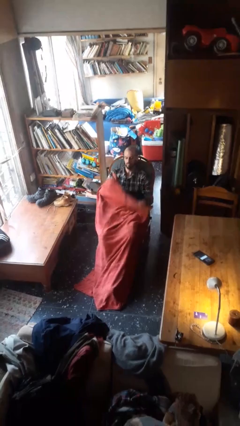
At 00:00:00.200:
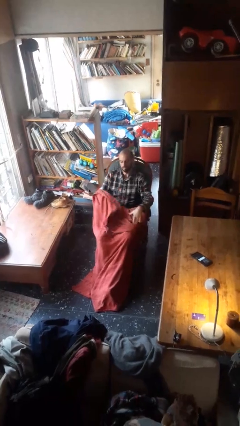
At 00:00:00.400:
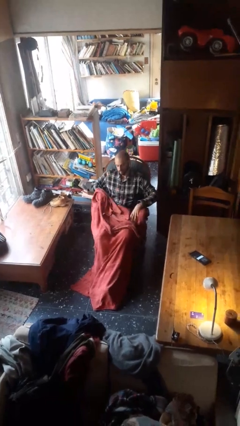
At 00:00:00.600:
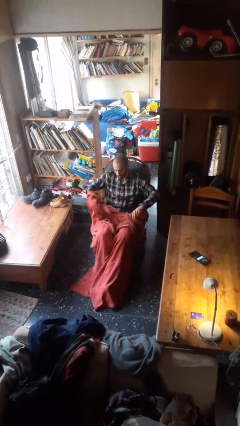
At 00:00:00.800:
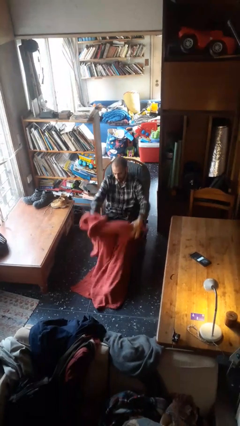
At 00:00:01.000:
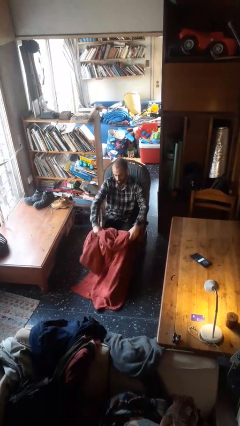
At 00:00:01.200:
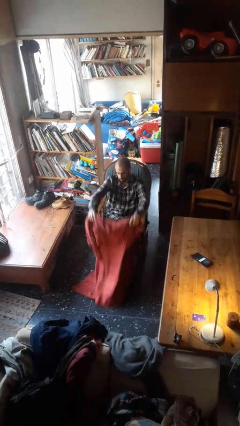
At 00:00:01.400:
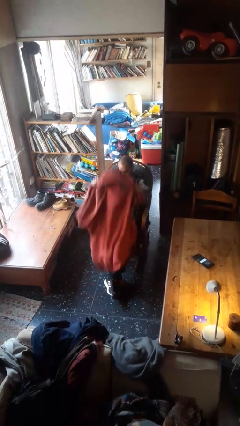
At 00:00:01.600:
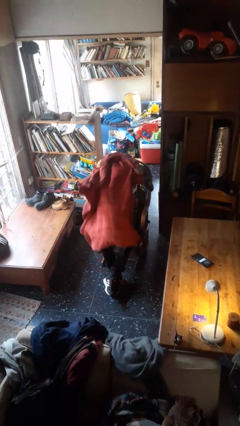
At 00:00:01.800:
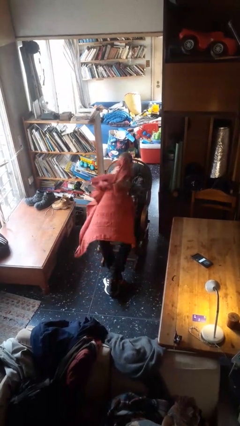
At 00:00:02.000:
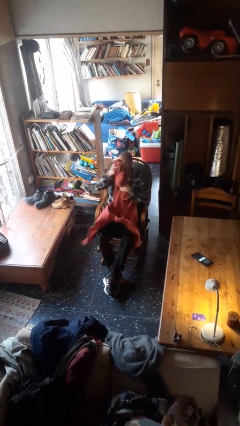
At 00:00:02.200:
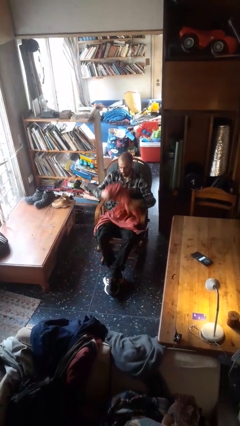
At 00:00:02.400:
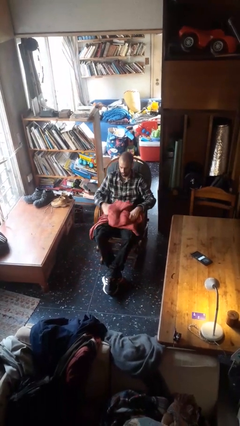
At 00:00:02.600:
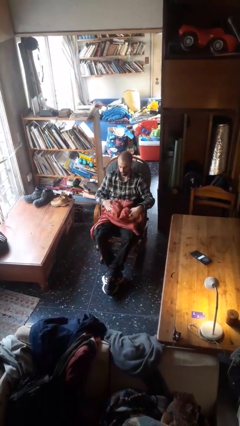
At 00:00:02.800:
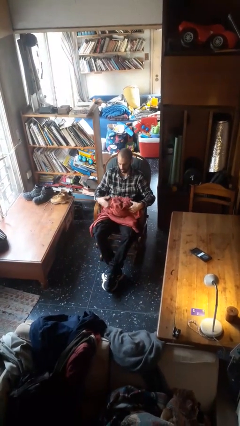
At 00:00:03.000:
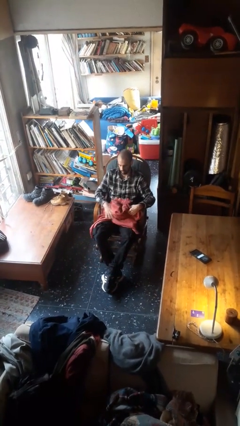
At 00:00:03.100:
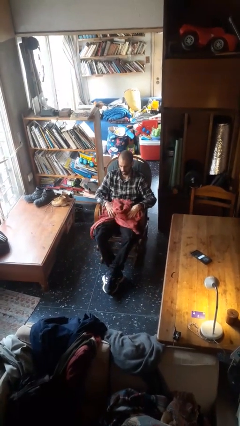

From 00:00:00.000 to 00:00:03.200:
person uncovers with blanket

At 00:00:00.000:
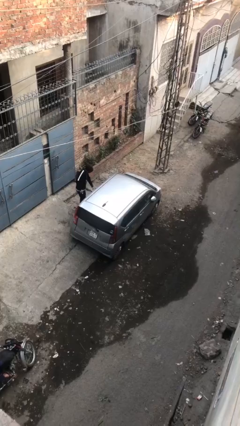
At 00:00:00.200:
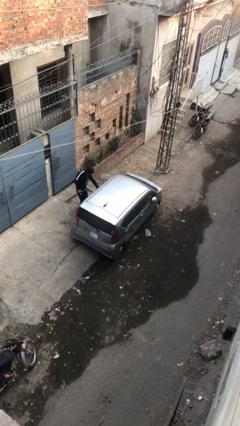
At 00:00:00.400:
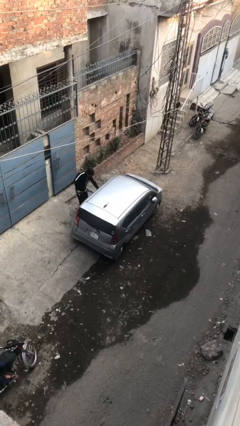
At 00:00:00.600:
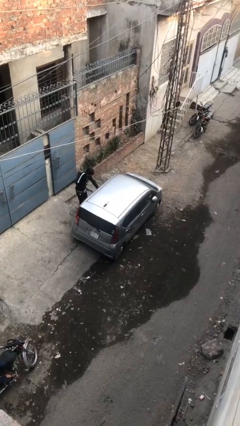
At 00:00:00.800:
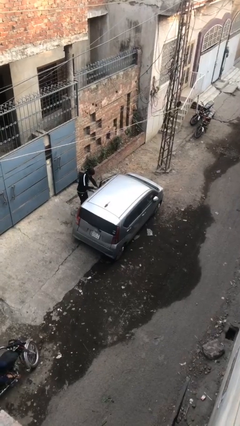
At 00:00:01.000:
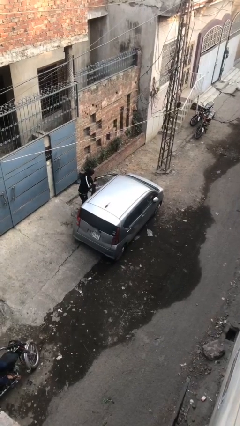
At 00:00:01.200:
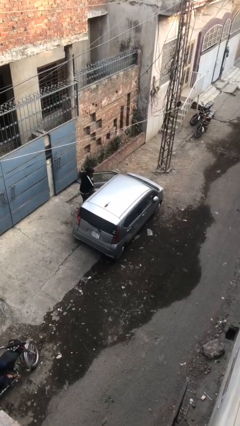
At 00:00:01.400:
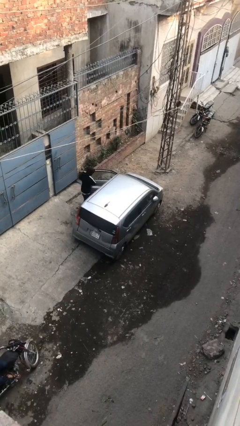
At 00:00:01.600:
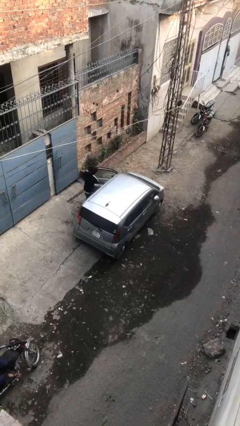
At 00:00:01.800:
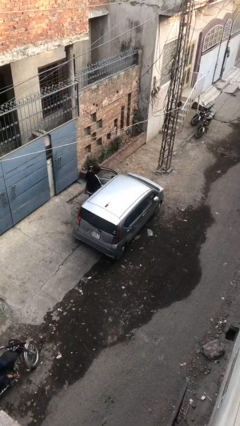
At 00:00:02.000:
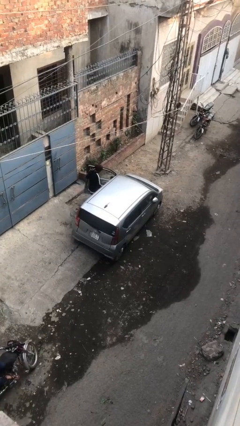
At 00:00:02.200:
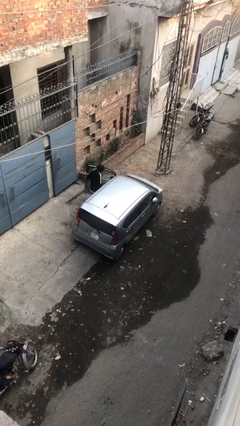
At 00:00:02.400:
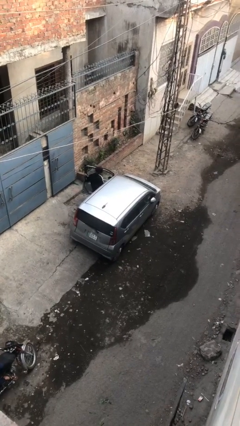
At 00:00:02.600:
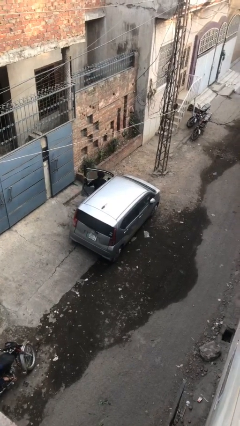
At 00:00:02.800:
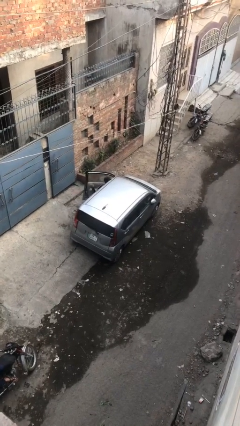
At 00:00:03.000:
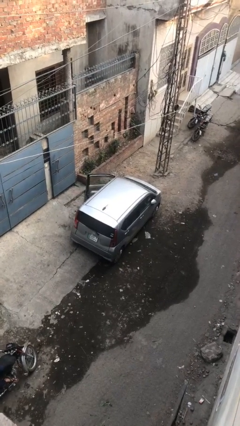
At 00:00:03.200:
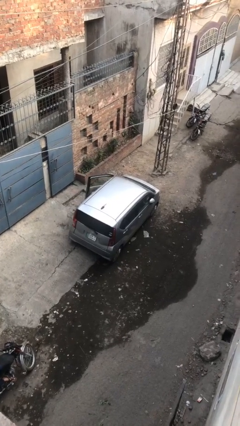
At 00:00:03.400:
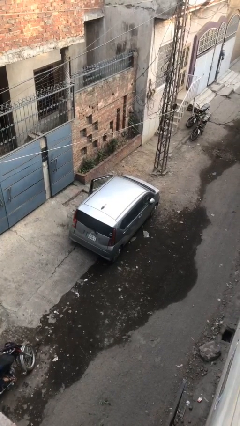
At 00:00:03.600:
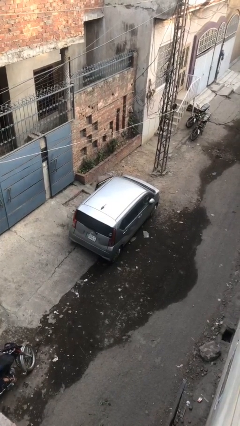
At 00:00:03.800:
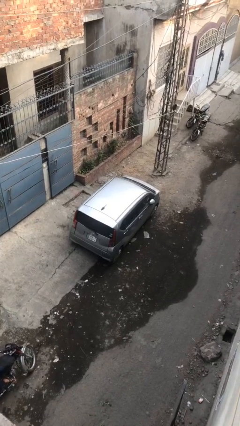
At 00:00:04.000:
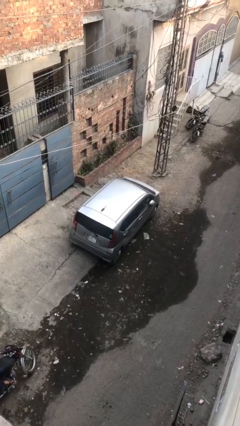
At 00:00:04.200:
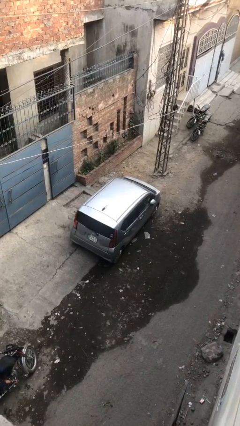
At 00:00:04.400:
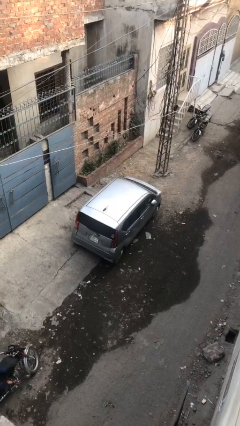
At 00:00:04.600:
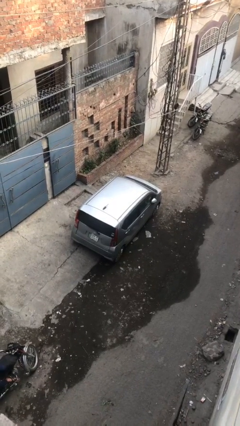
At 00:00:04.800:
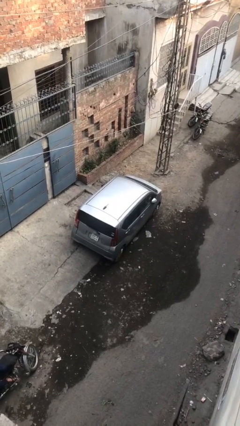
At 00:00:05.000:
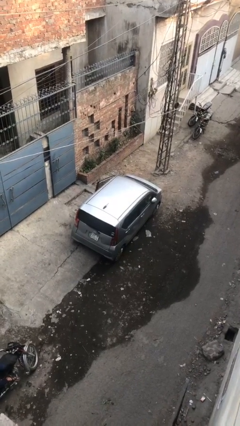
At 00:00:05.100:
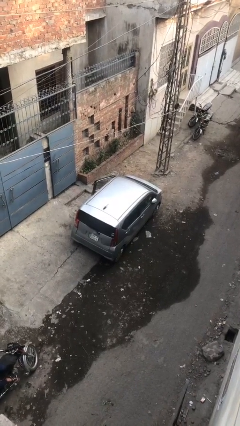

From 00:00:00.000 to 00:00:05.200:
car picks up person

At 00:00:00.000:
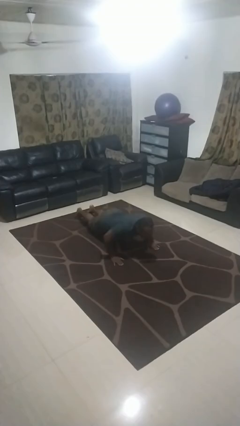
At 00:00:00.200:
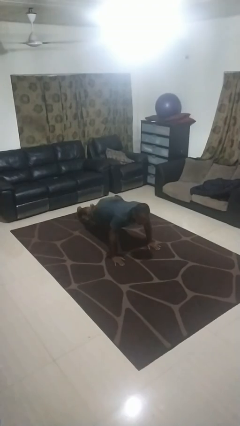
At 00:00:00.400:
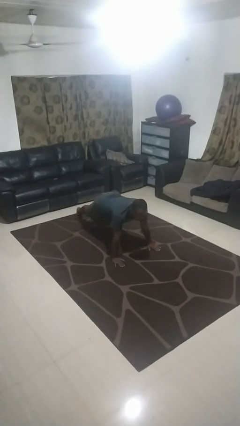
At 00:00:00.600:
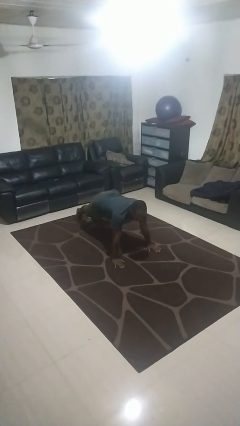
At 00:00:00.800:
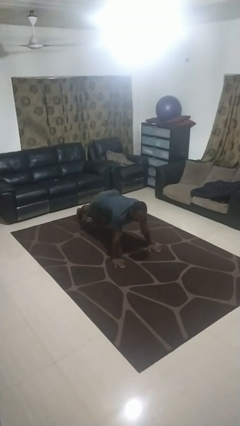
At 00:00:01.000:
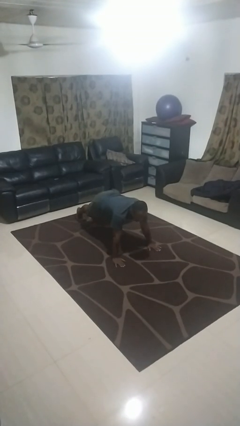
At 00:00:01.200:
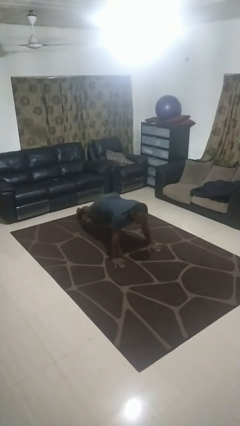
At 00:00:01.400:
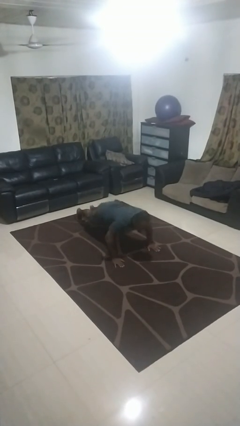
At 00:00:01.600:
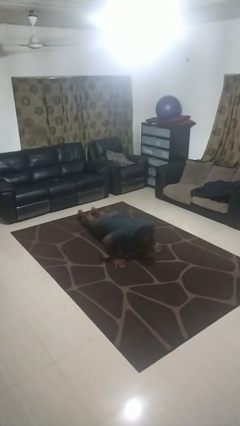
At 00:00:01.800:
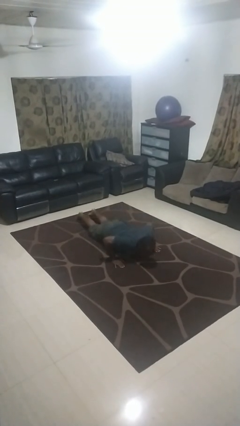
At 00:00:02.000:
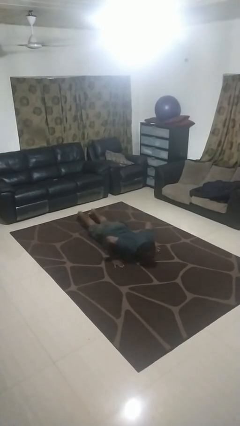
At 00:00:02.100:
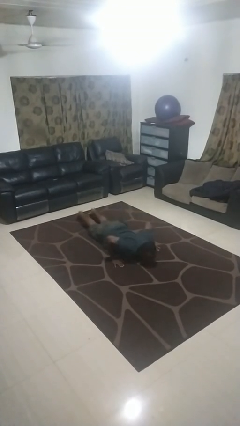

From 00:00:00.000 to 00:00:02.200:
person exercises with pushup

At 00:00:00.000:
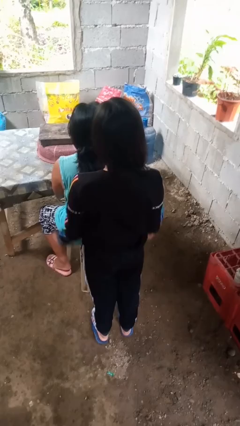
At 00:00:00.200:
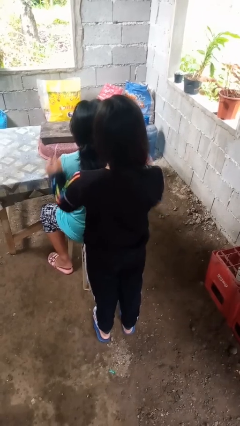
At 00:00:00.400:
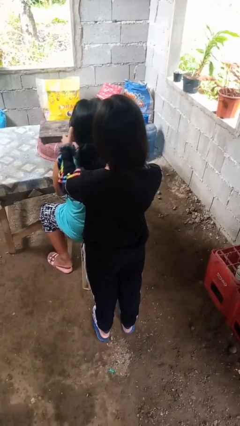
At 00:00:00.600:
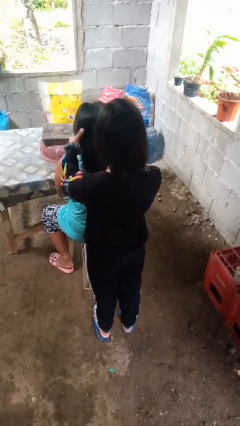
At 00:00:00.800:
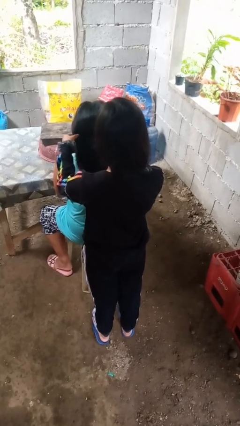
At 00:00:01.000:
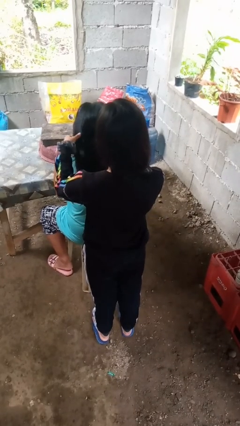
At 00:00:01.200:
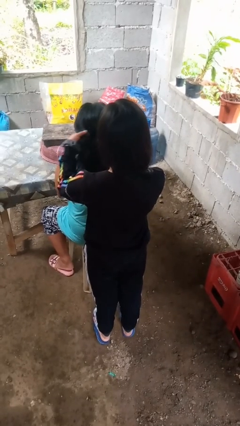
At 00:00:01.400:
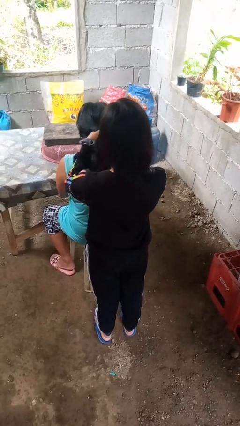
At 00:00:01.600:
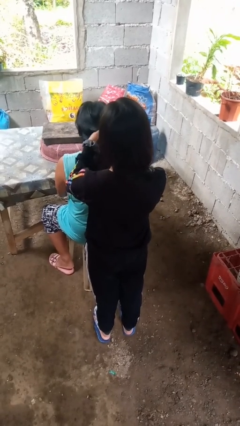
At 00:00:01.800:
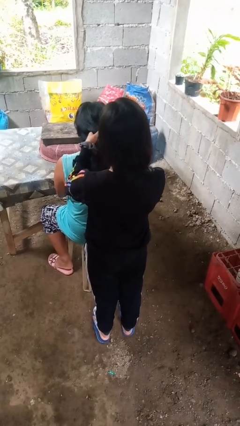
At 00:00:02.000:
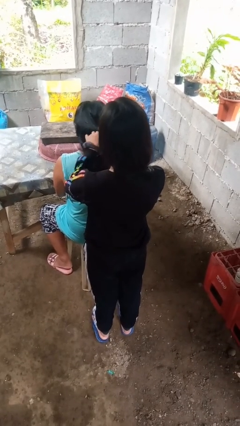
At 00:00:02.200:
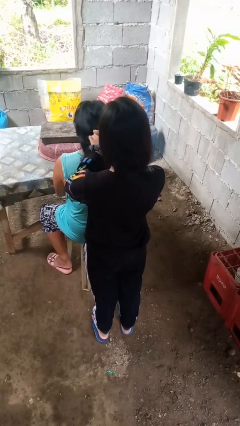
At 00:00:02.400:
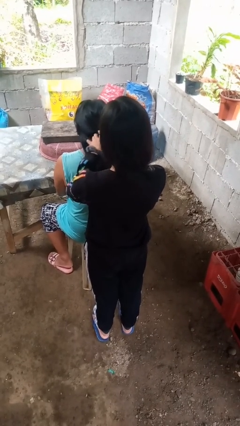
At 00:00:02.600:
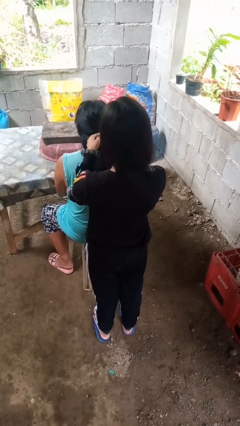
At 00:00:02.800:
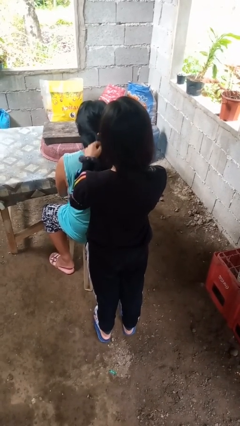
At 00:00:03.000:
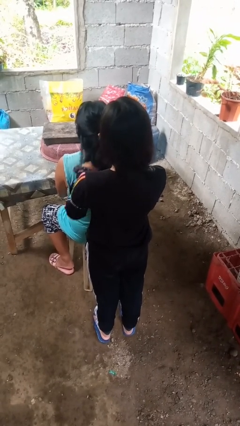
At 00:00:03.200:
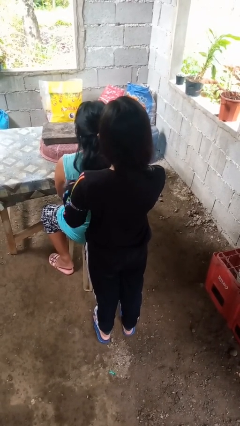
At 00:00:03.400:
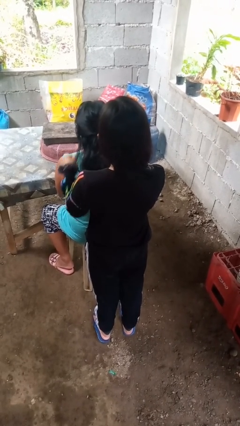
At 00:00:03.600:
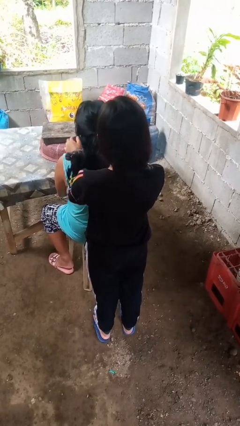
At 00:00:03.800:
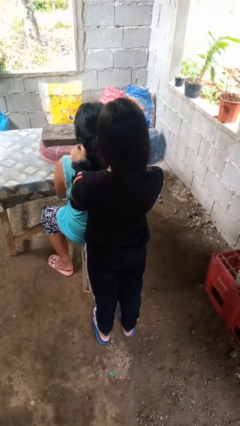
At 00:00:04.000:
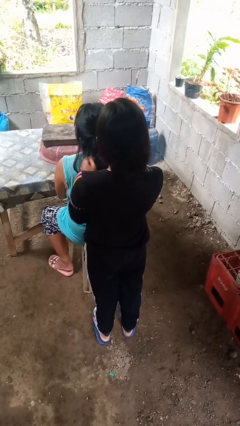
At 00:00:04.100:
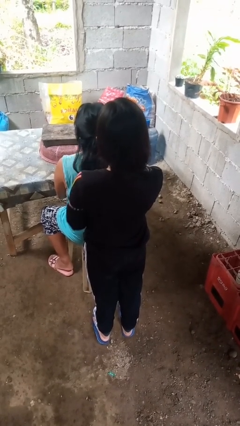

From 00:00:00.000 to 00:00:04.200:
person braids hair of person

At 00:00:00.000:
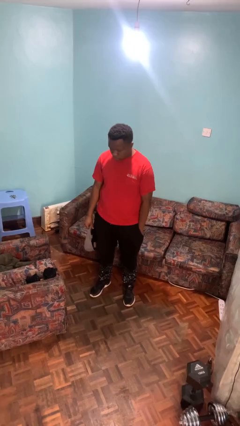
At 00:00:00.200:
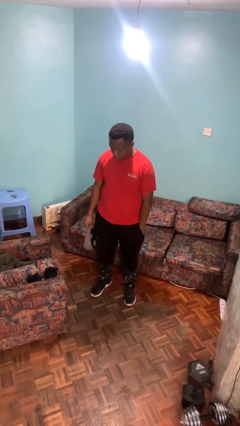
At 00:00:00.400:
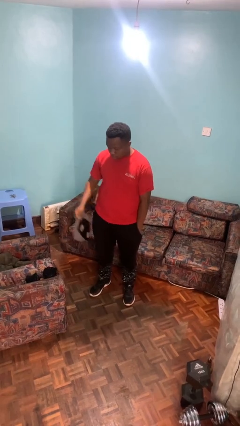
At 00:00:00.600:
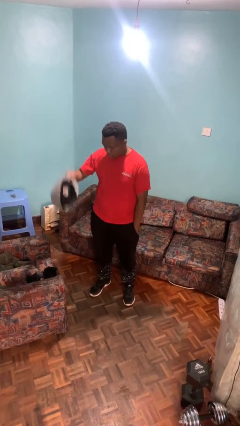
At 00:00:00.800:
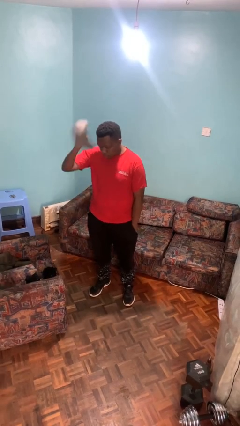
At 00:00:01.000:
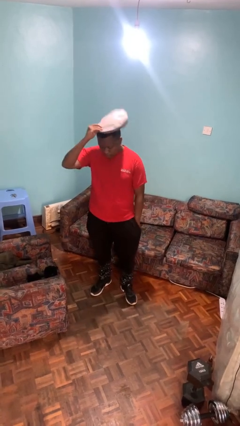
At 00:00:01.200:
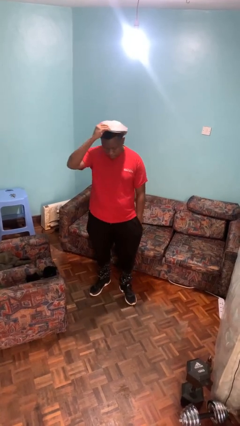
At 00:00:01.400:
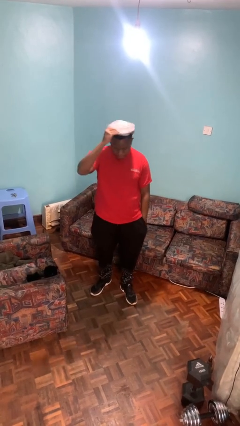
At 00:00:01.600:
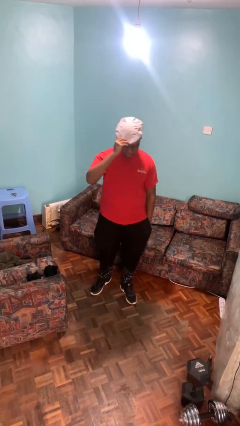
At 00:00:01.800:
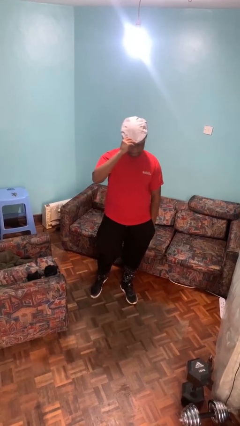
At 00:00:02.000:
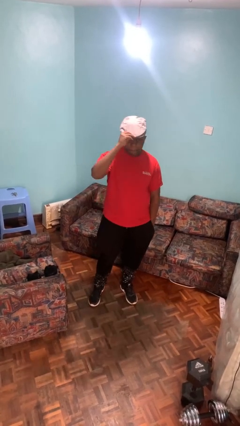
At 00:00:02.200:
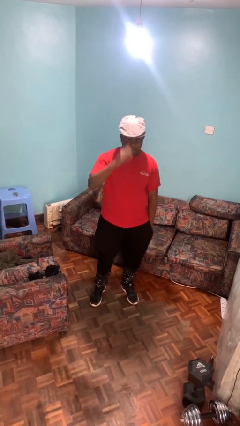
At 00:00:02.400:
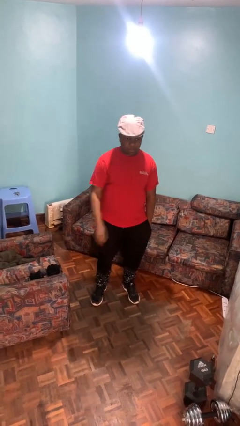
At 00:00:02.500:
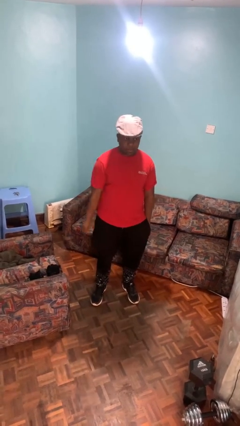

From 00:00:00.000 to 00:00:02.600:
person puts on hat
